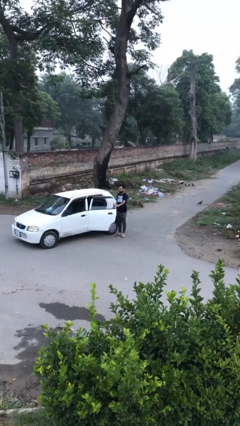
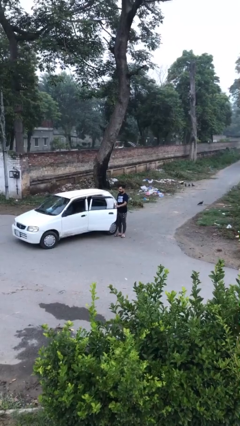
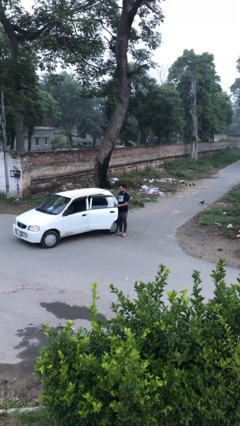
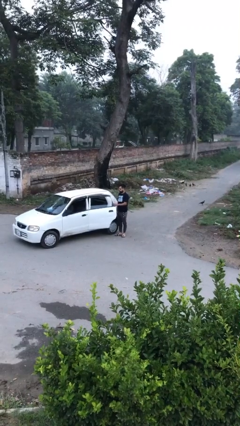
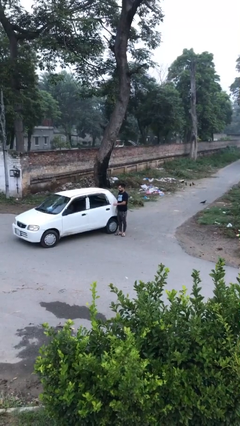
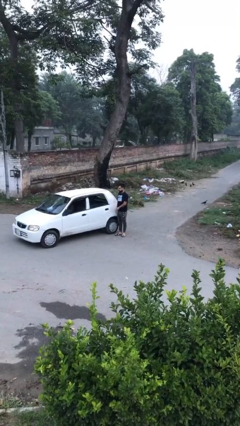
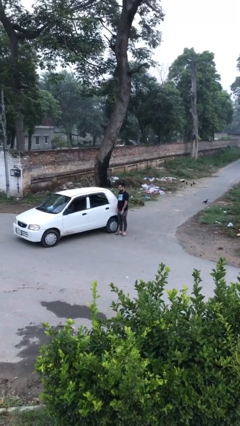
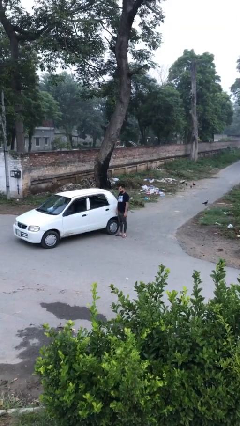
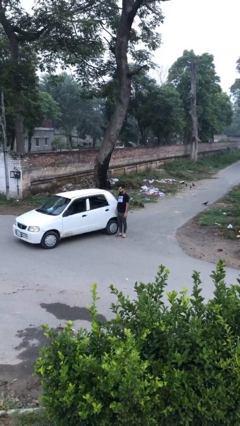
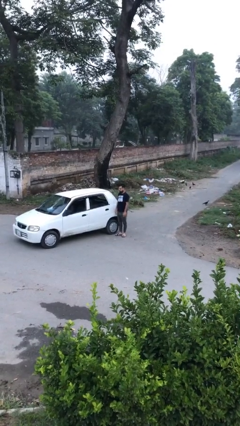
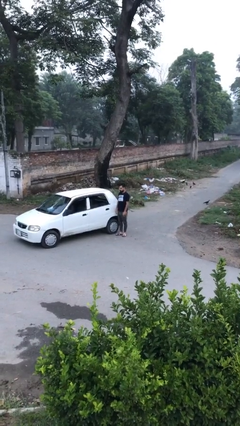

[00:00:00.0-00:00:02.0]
person closes car door

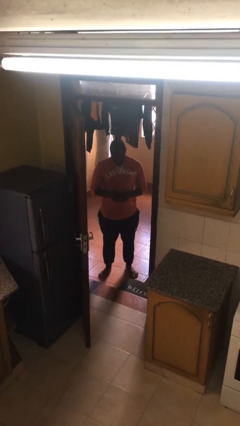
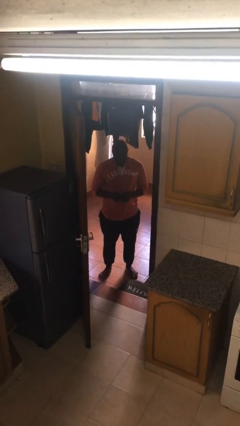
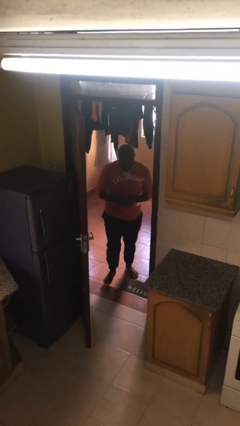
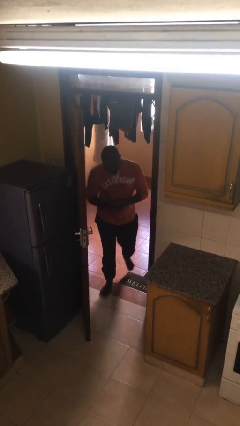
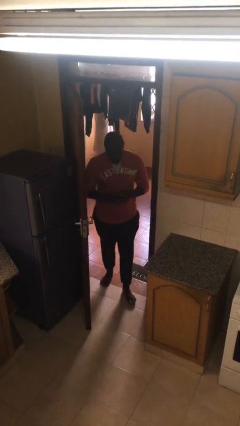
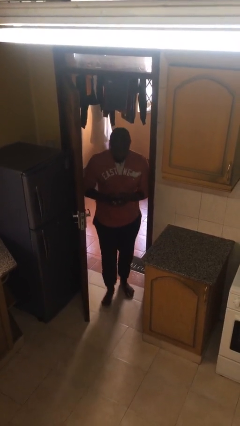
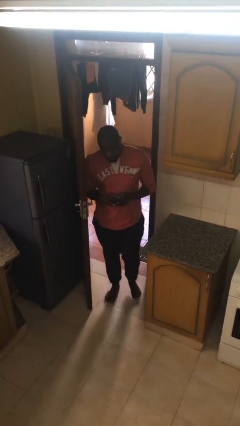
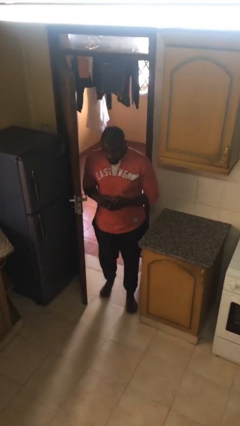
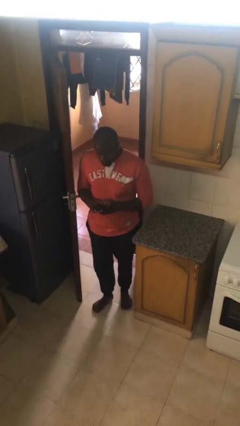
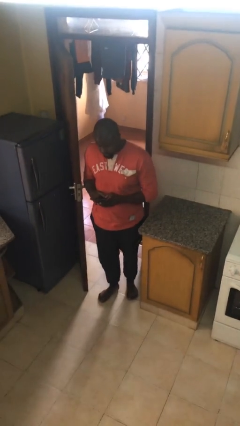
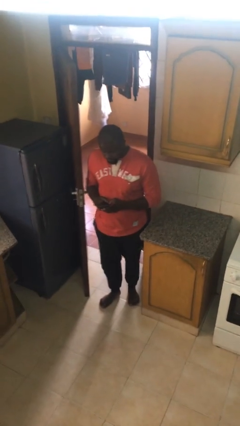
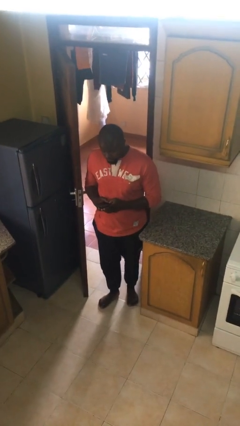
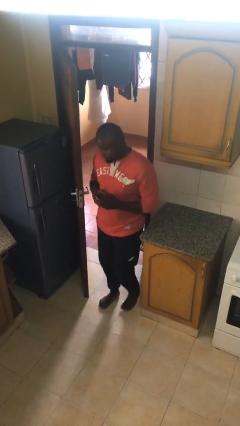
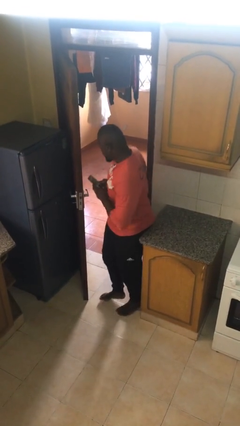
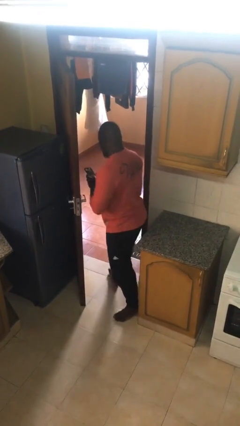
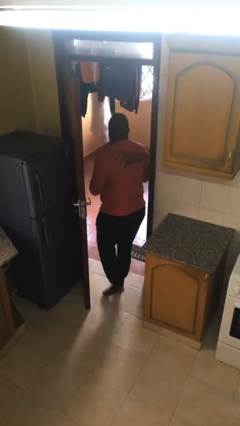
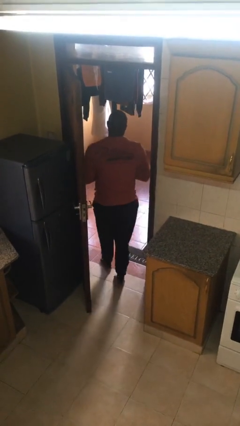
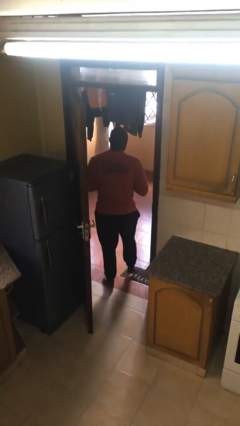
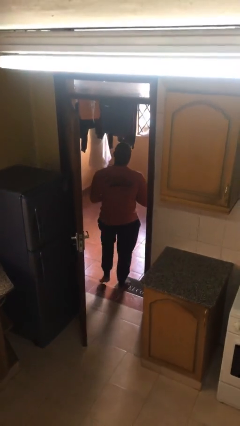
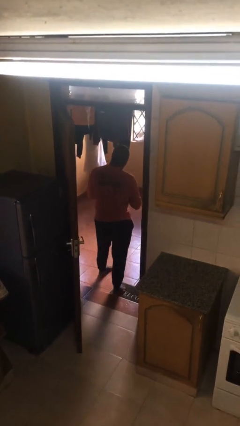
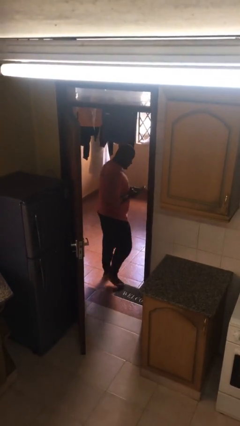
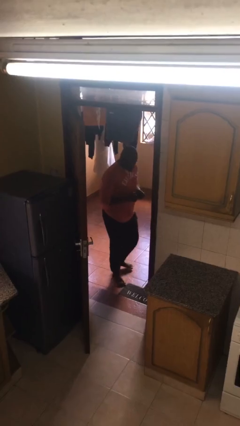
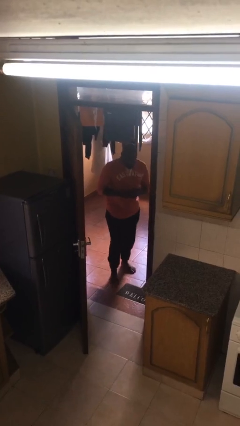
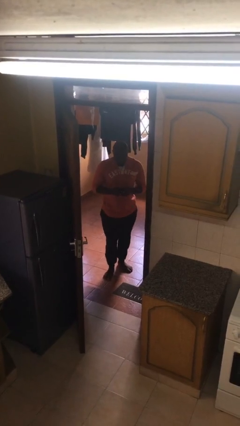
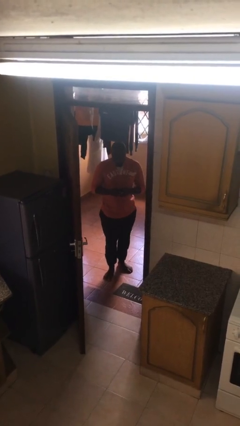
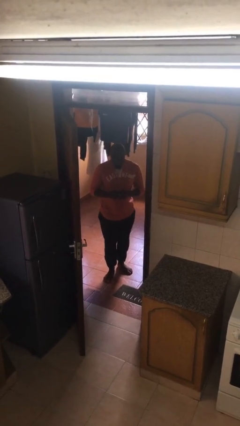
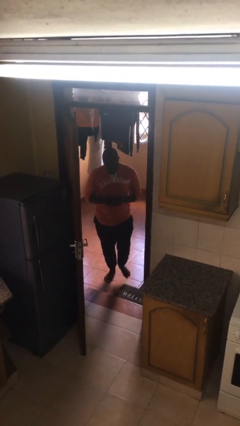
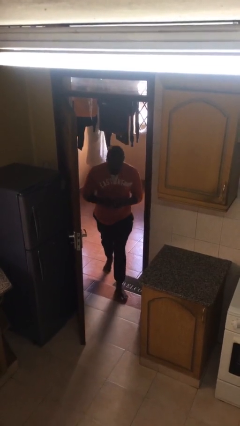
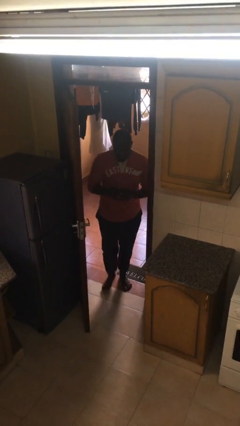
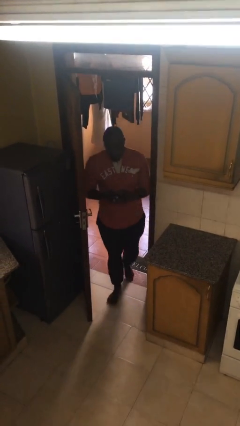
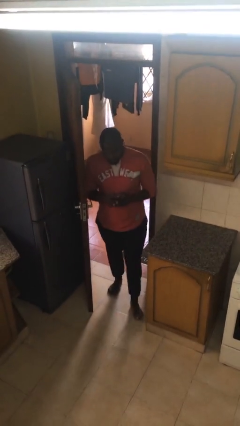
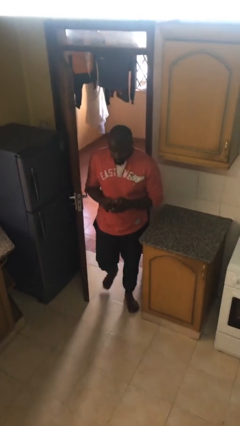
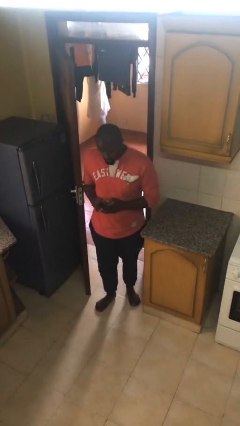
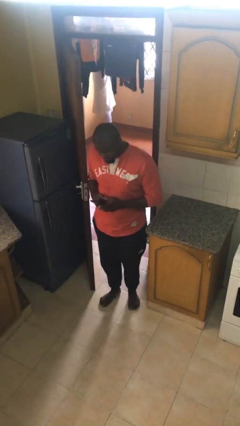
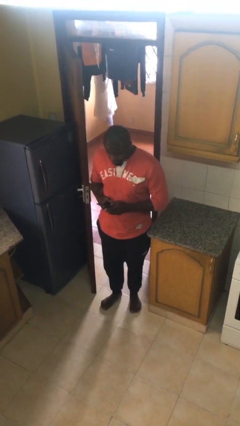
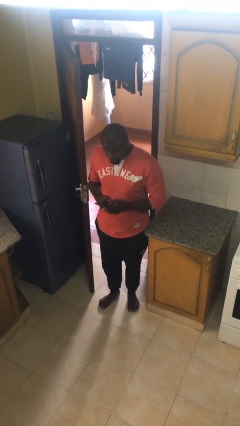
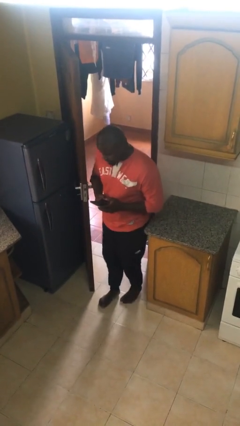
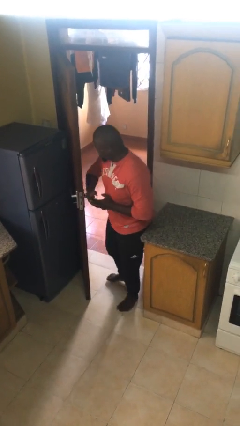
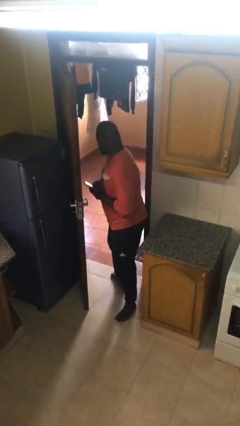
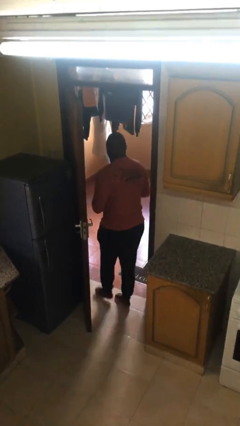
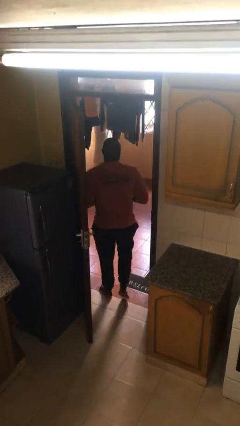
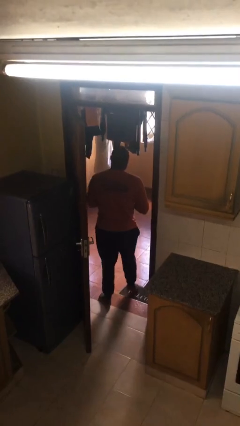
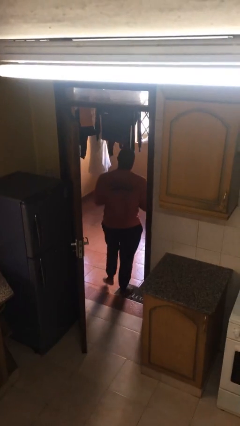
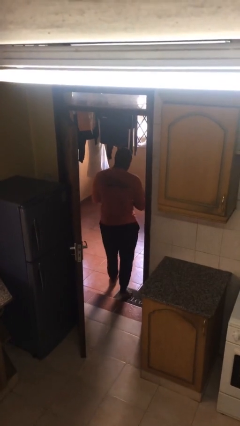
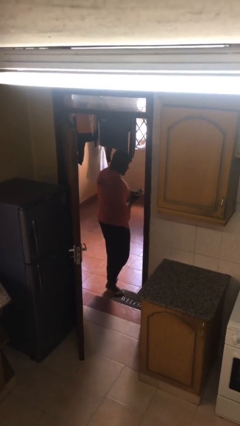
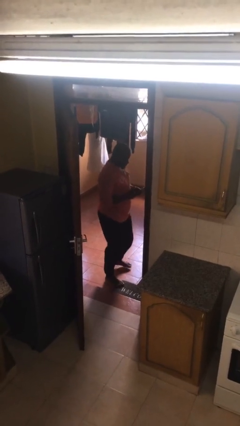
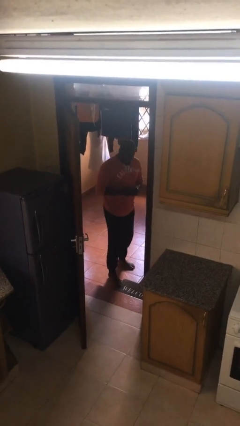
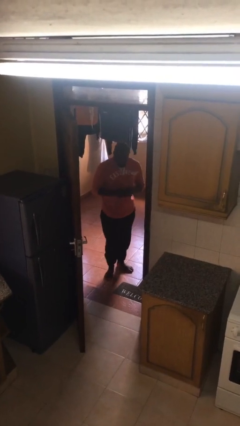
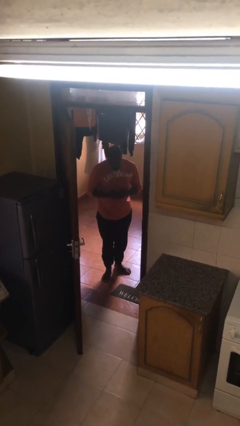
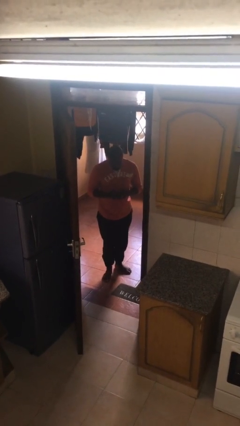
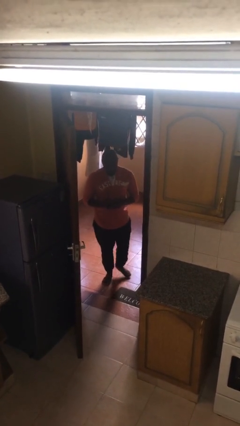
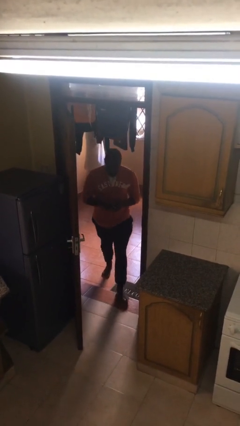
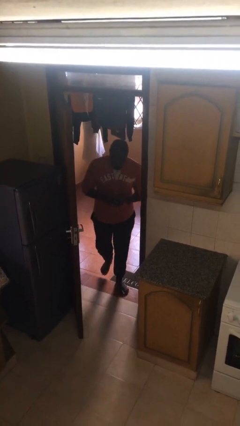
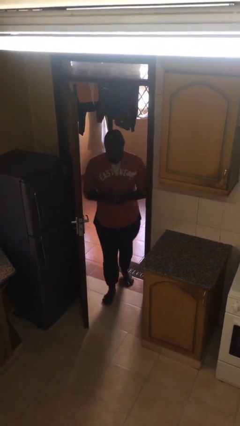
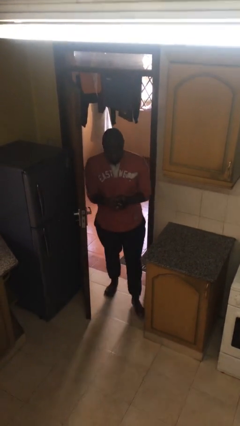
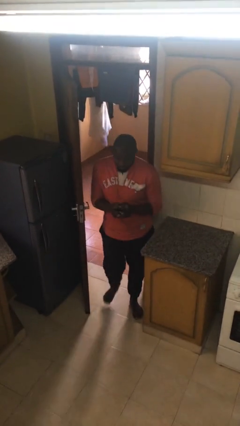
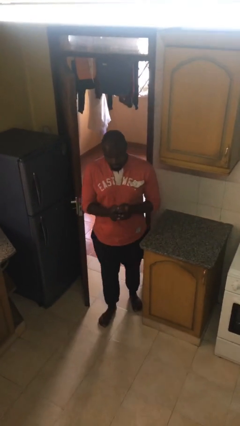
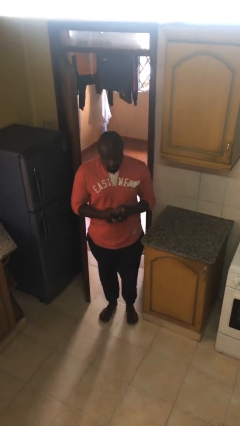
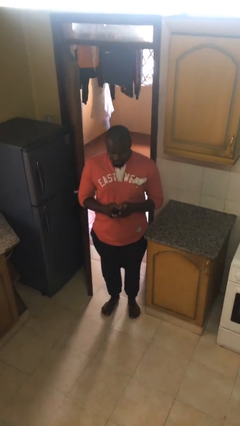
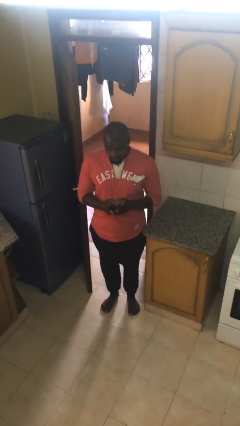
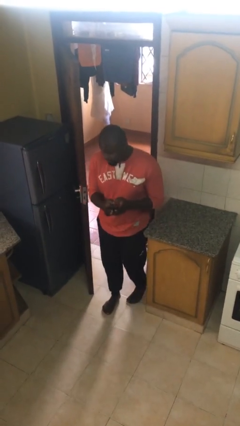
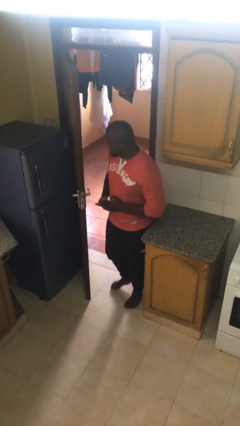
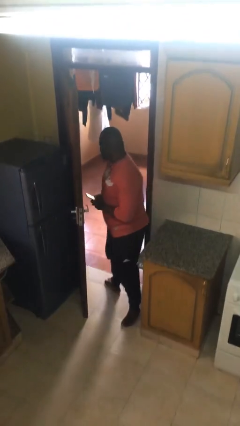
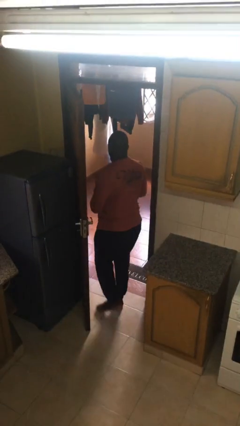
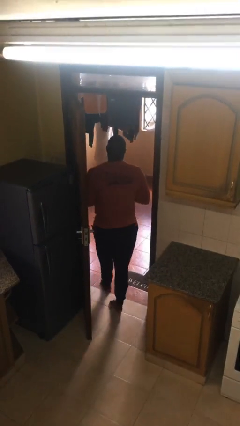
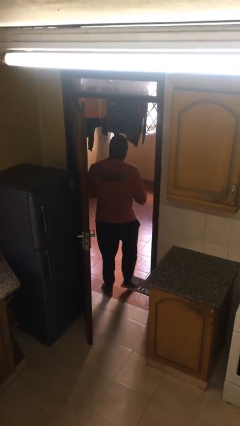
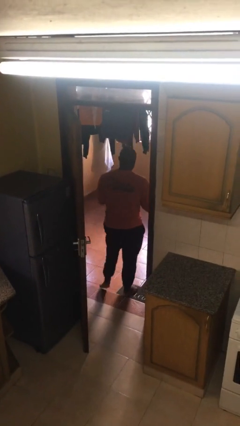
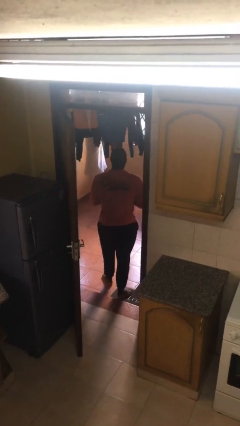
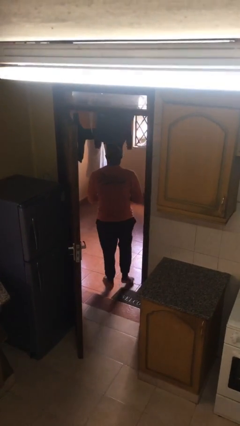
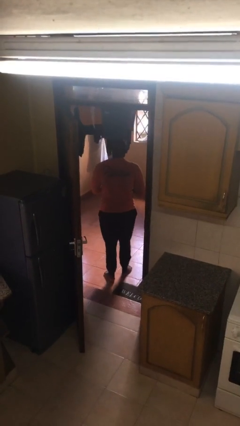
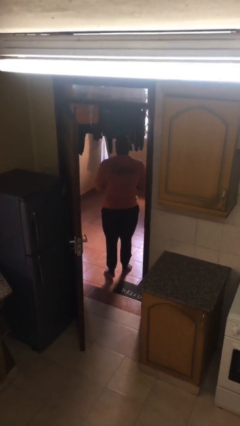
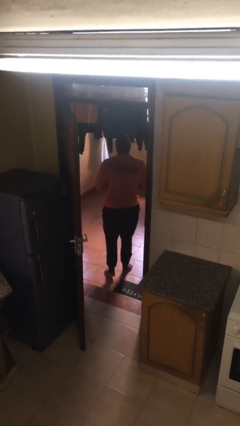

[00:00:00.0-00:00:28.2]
person texts on phone

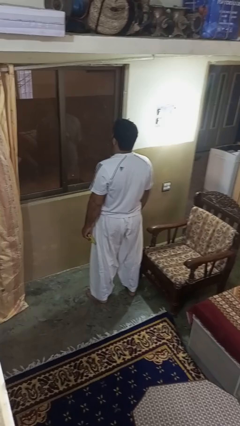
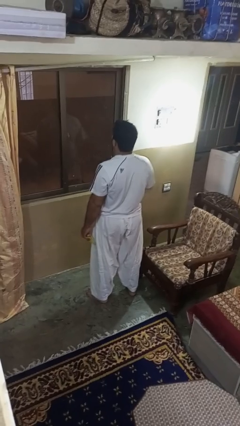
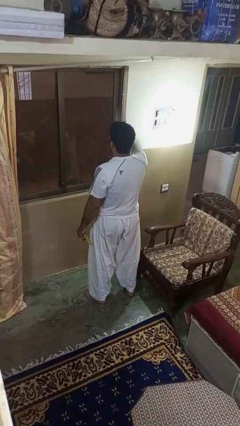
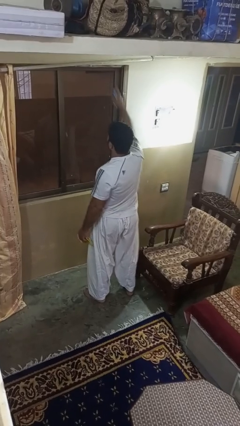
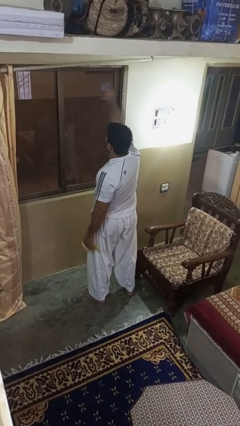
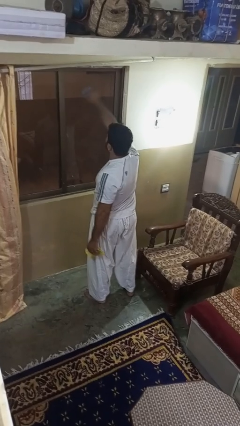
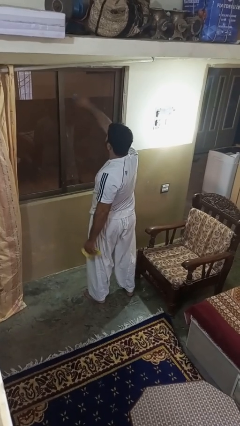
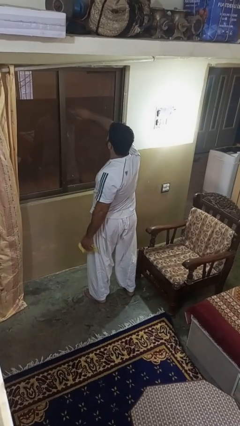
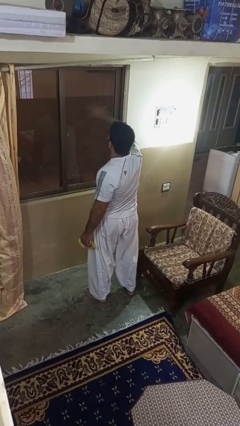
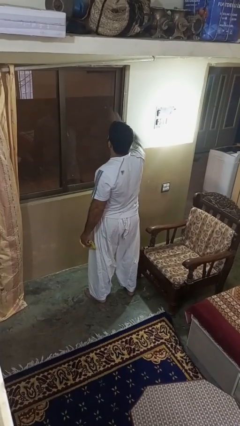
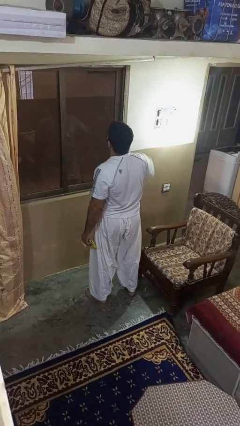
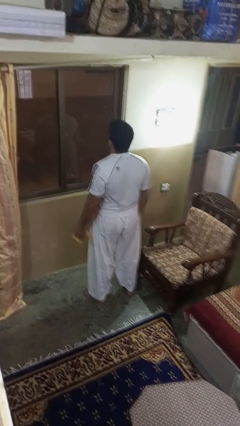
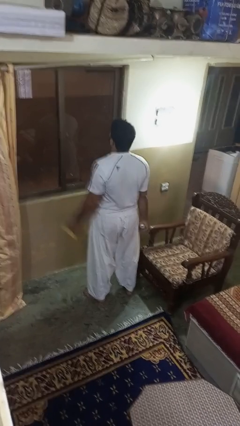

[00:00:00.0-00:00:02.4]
person sprays from bottle
